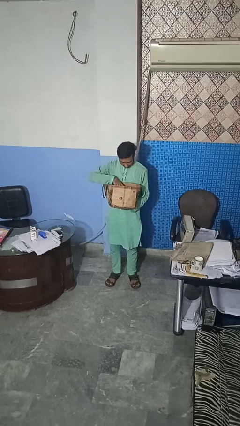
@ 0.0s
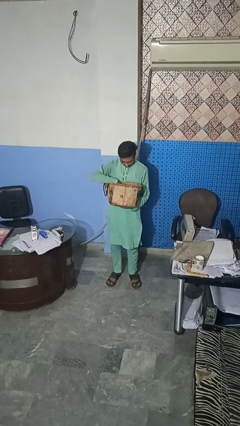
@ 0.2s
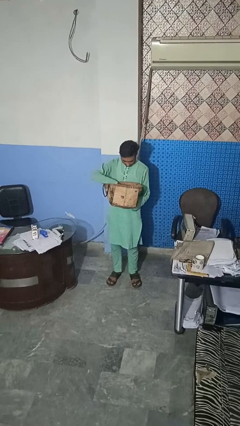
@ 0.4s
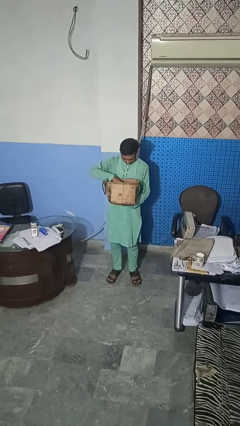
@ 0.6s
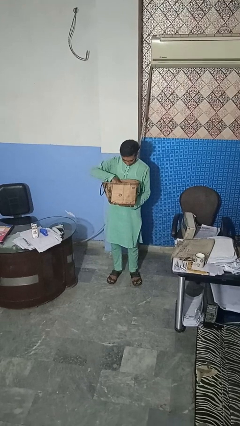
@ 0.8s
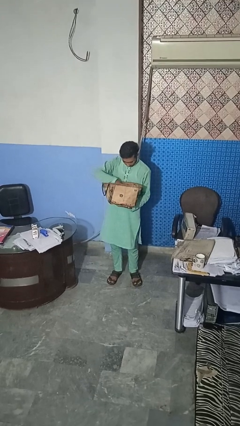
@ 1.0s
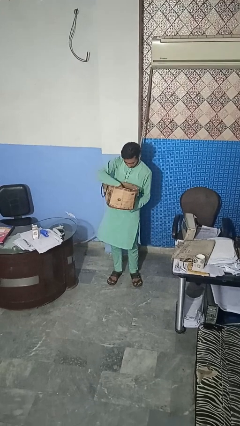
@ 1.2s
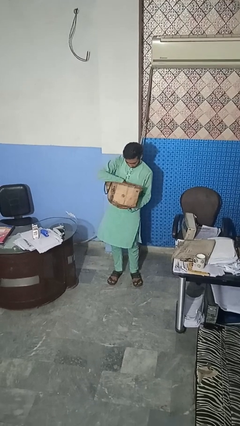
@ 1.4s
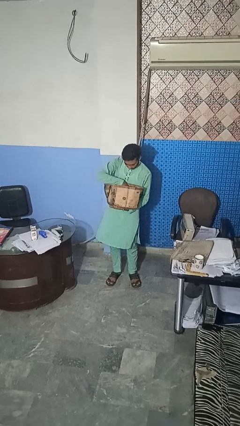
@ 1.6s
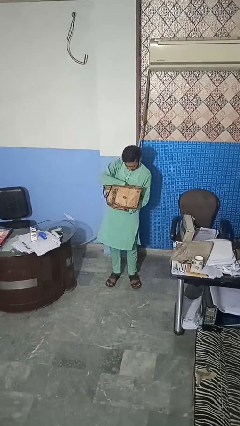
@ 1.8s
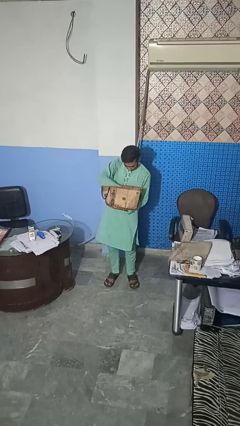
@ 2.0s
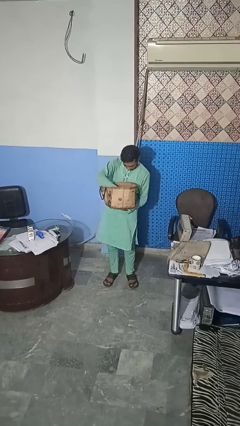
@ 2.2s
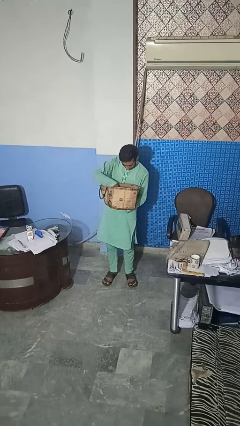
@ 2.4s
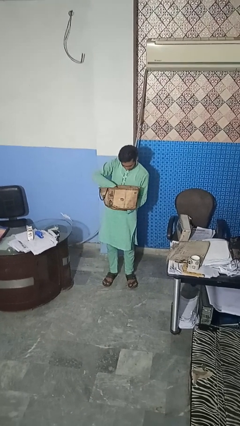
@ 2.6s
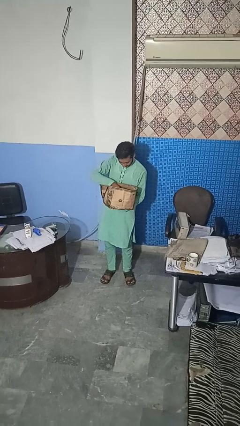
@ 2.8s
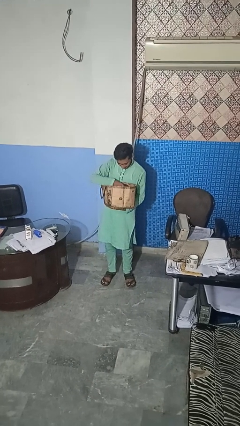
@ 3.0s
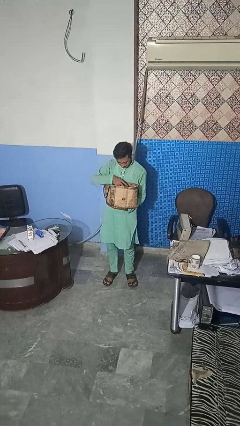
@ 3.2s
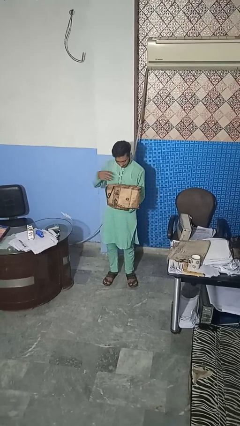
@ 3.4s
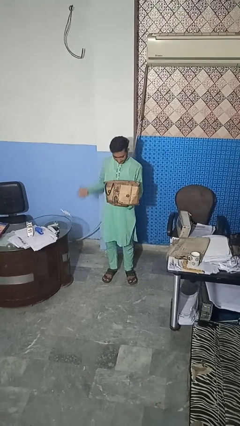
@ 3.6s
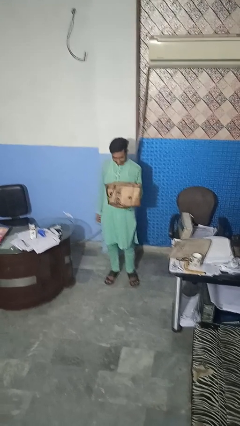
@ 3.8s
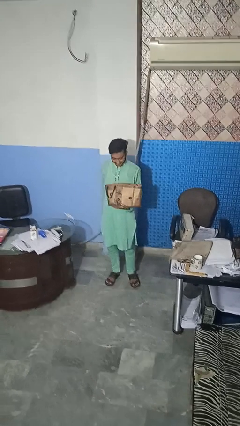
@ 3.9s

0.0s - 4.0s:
person searches in bag

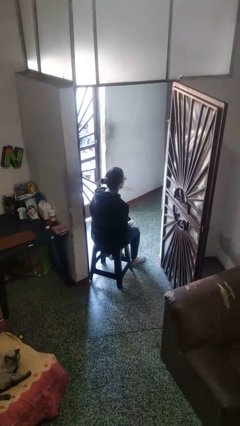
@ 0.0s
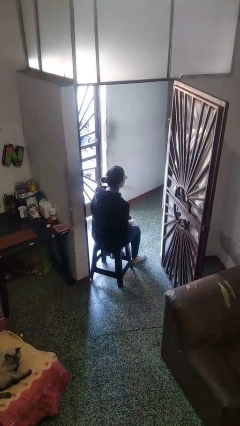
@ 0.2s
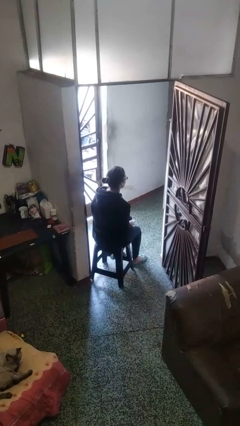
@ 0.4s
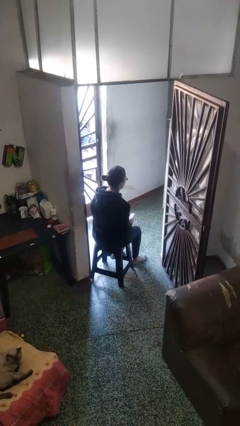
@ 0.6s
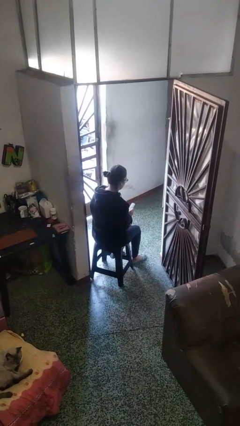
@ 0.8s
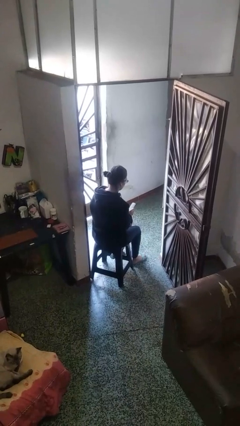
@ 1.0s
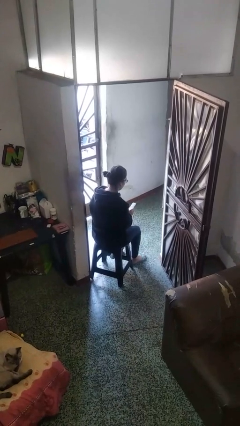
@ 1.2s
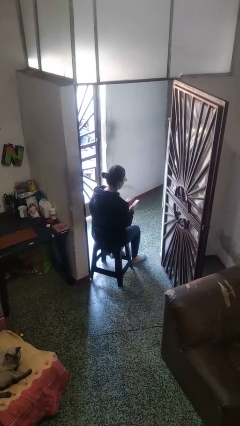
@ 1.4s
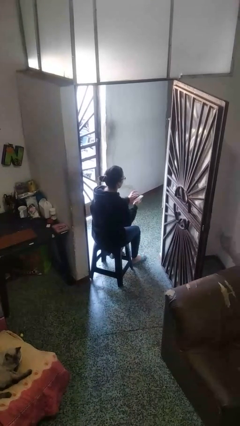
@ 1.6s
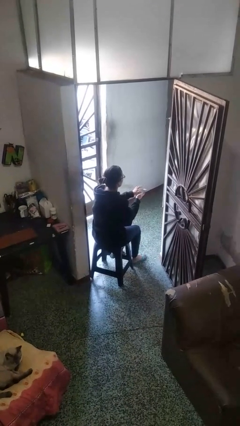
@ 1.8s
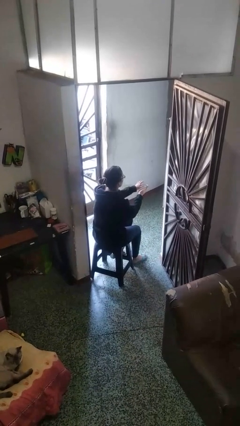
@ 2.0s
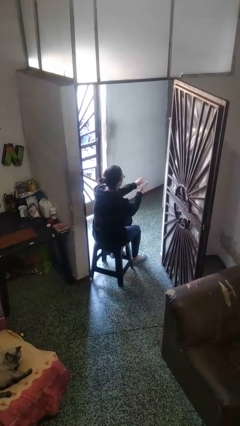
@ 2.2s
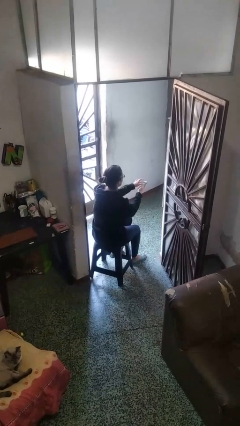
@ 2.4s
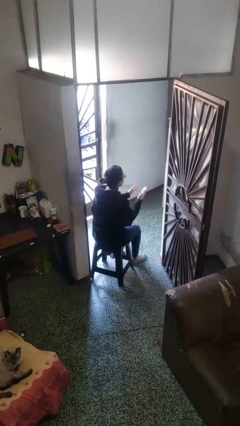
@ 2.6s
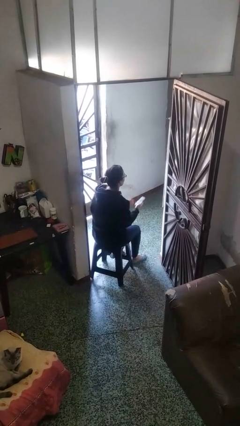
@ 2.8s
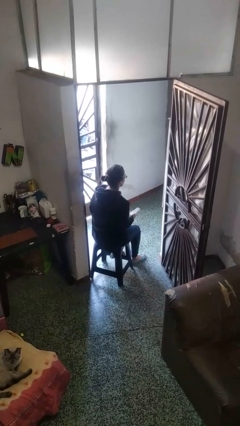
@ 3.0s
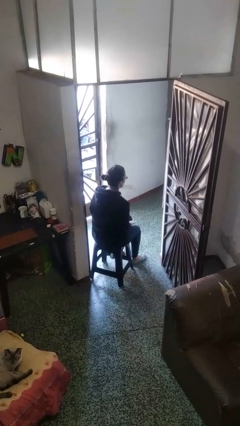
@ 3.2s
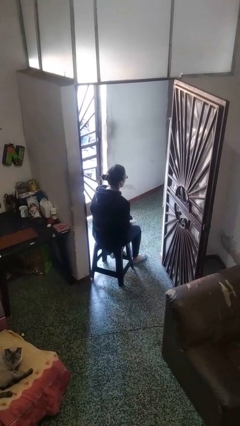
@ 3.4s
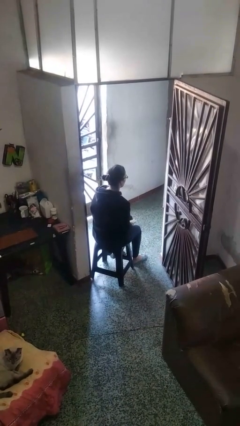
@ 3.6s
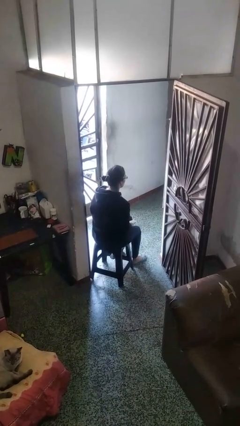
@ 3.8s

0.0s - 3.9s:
person uses television remote

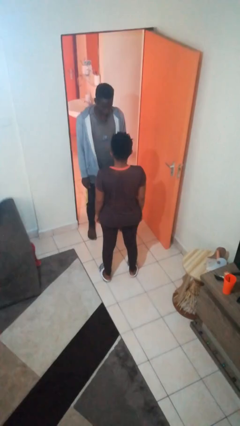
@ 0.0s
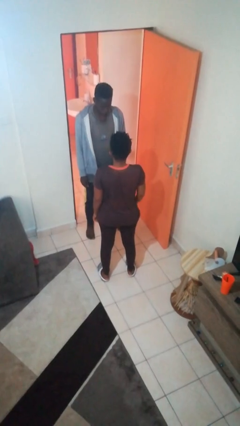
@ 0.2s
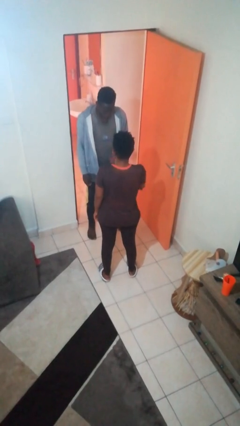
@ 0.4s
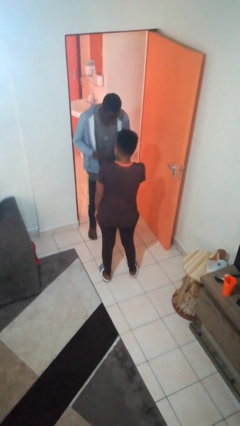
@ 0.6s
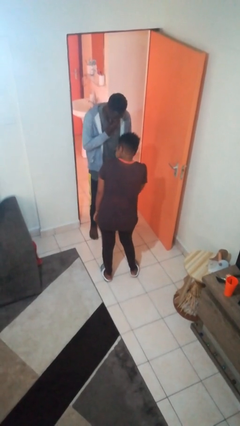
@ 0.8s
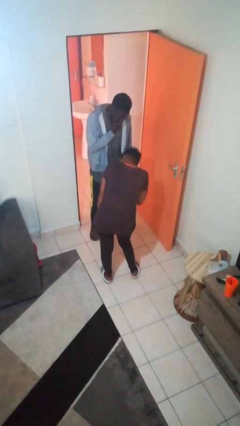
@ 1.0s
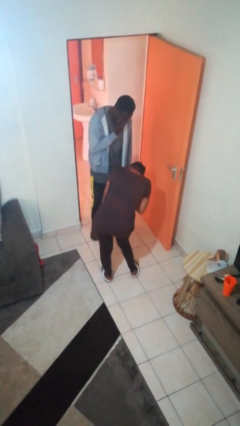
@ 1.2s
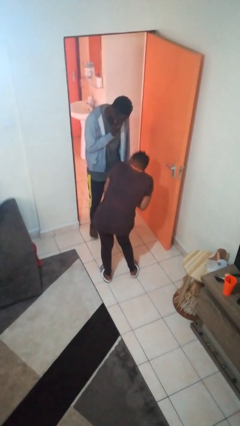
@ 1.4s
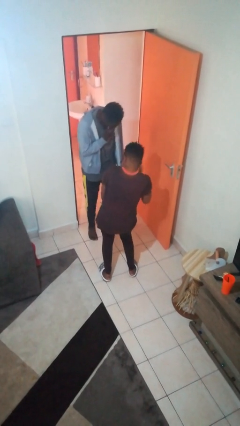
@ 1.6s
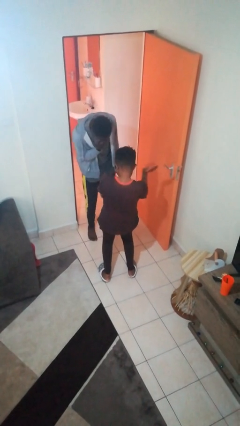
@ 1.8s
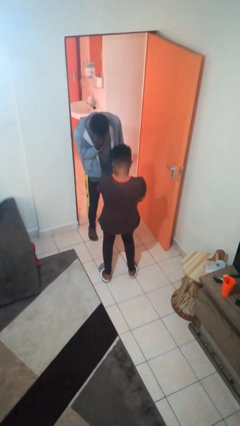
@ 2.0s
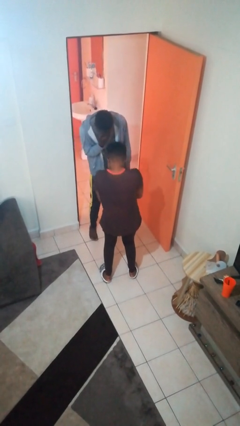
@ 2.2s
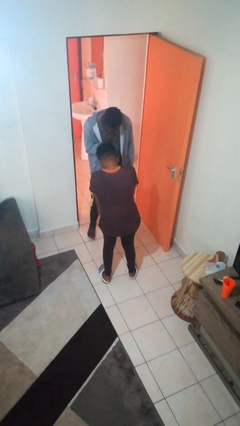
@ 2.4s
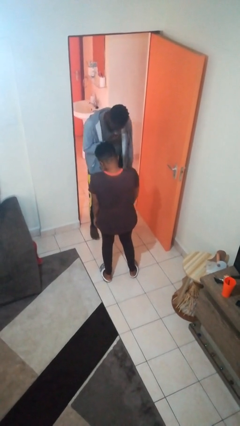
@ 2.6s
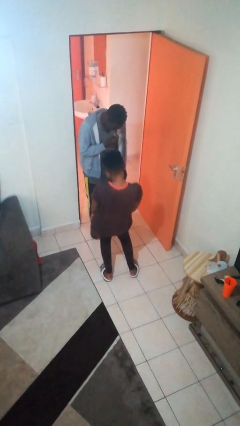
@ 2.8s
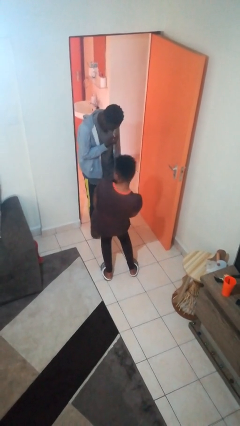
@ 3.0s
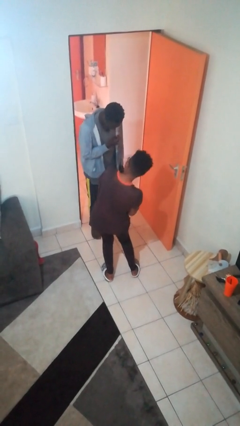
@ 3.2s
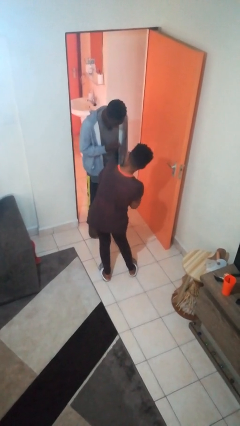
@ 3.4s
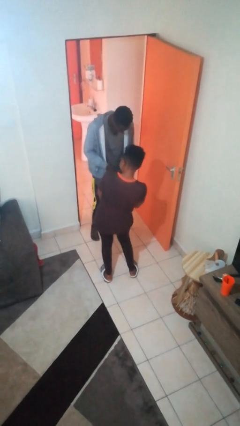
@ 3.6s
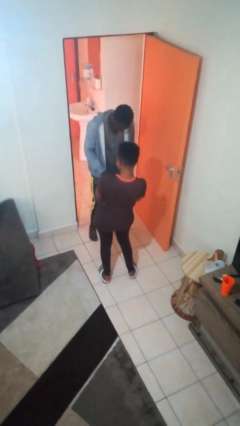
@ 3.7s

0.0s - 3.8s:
person laughs with person

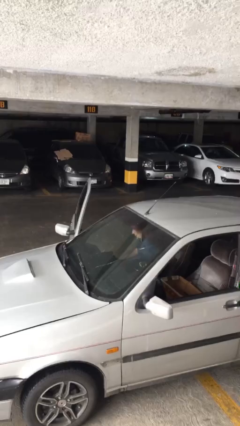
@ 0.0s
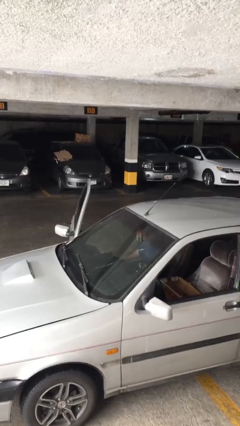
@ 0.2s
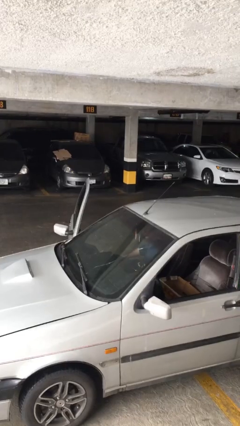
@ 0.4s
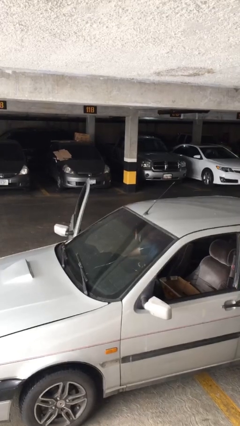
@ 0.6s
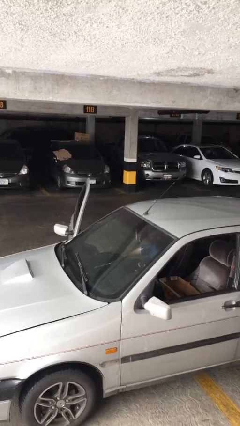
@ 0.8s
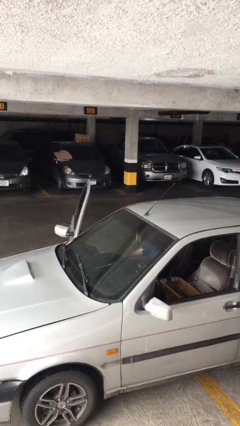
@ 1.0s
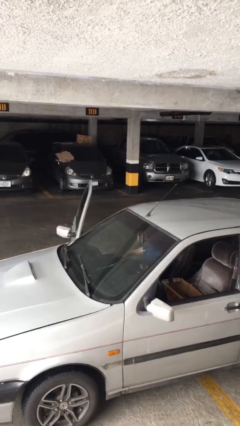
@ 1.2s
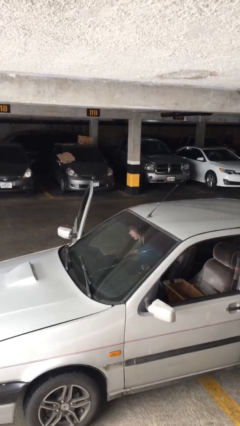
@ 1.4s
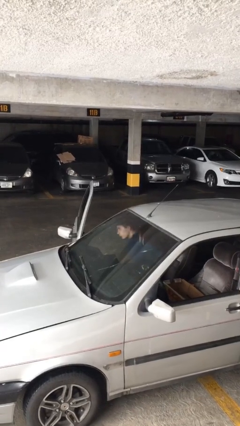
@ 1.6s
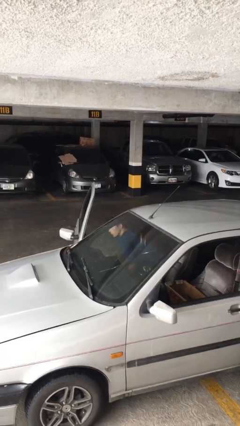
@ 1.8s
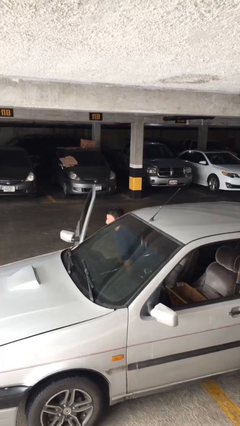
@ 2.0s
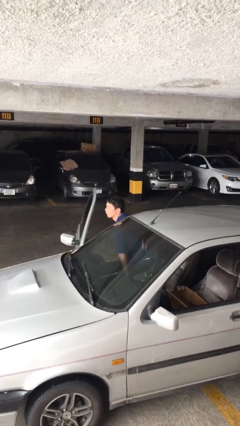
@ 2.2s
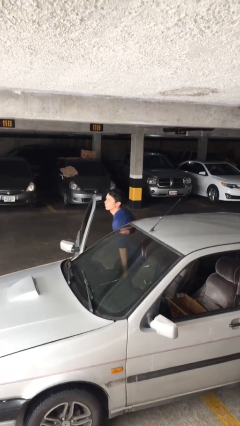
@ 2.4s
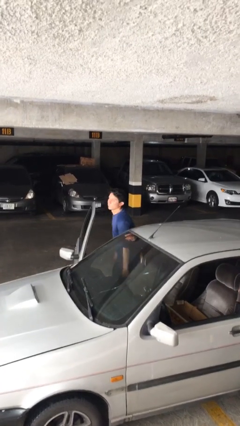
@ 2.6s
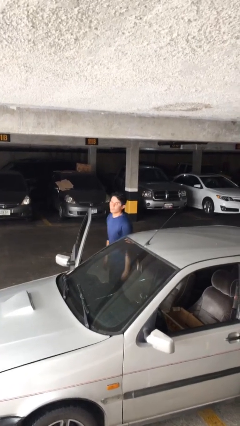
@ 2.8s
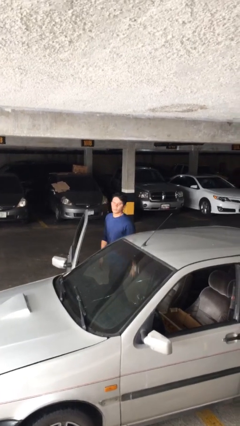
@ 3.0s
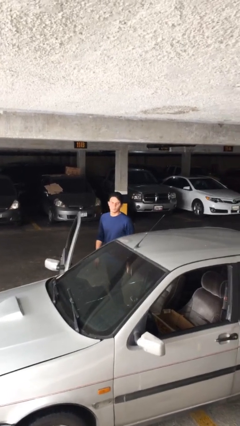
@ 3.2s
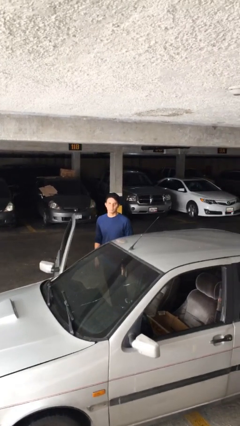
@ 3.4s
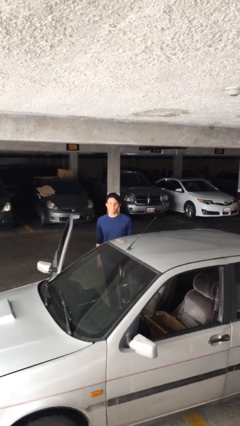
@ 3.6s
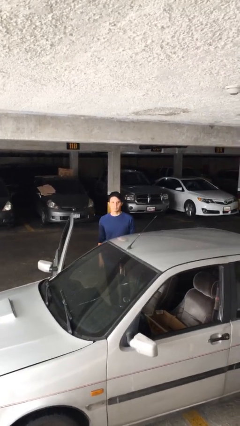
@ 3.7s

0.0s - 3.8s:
person exits car

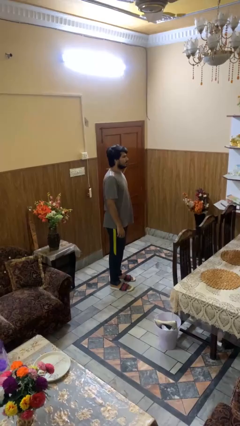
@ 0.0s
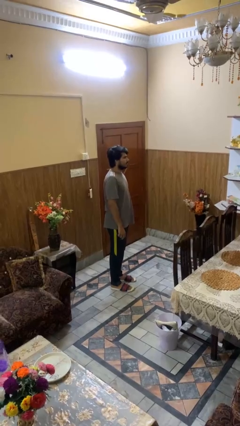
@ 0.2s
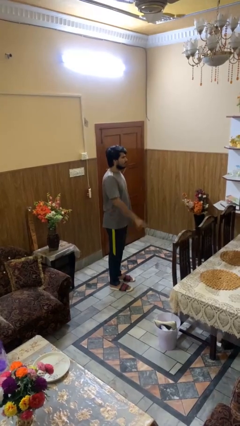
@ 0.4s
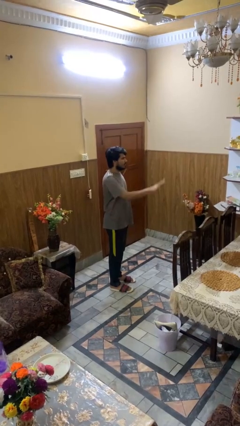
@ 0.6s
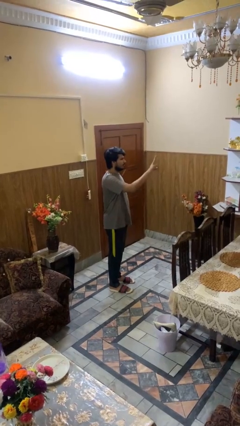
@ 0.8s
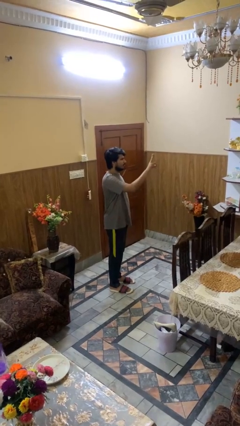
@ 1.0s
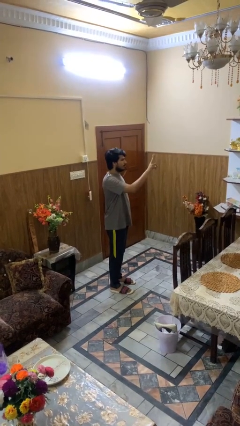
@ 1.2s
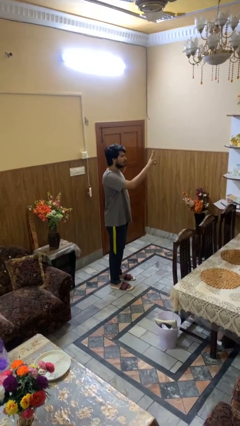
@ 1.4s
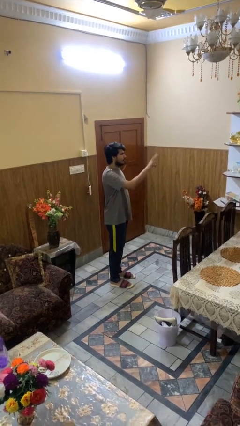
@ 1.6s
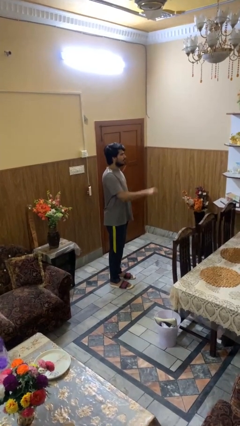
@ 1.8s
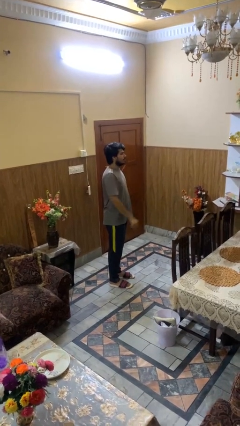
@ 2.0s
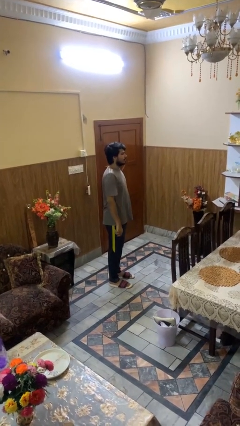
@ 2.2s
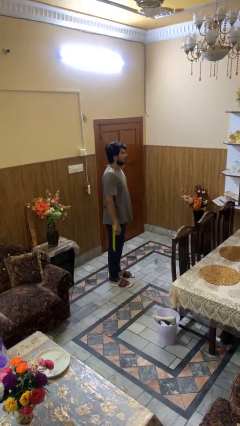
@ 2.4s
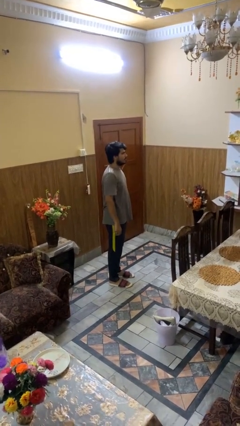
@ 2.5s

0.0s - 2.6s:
person gestures peace
